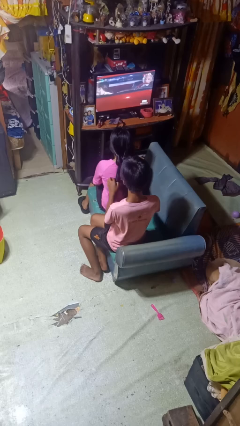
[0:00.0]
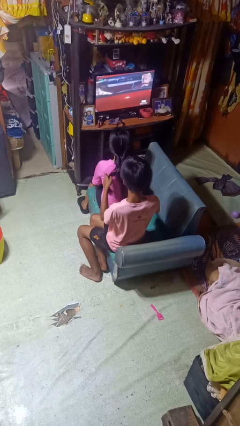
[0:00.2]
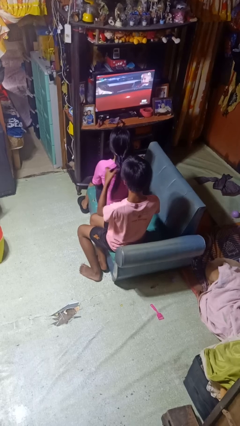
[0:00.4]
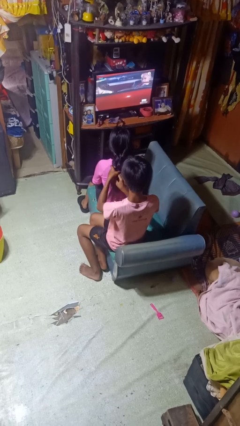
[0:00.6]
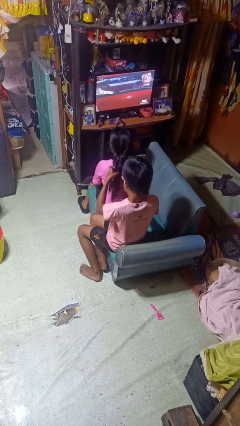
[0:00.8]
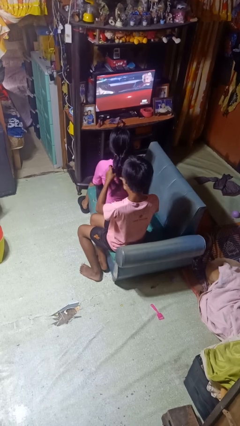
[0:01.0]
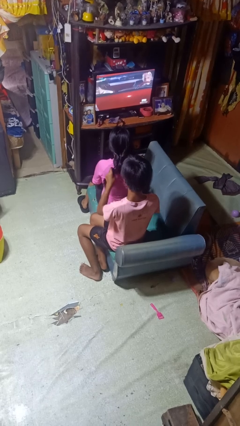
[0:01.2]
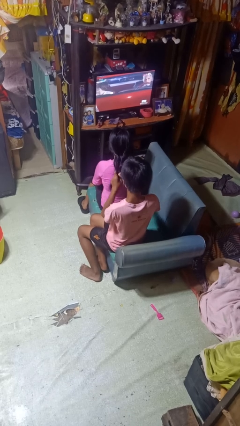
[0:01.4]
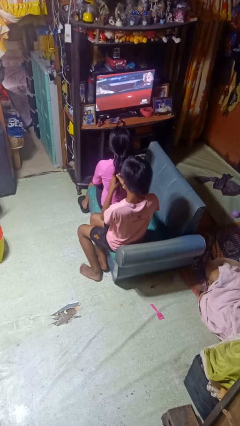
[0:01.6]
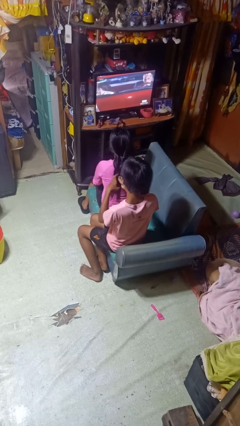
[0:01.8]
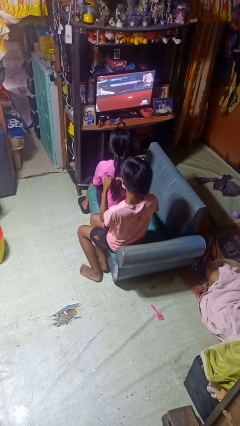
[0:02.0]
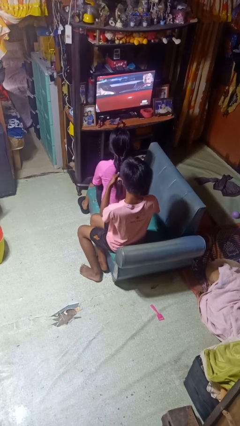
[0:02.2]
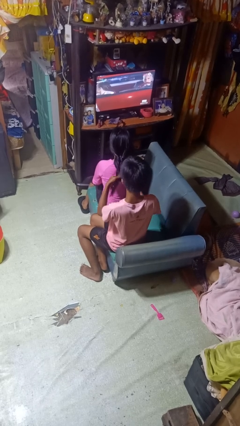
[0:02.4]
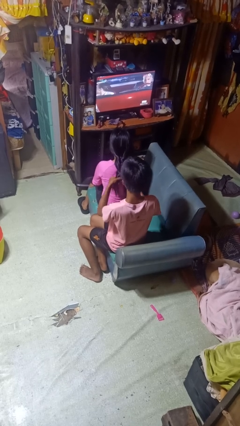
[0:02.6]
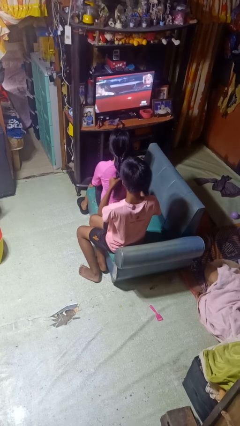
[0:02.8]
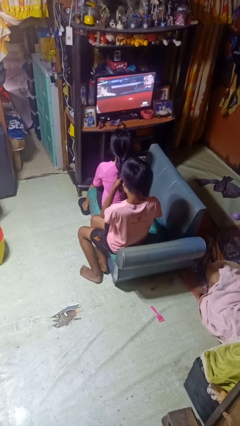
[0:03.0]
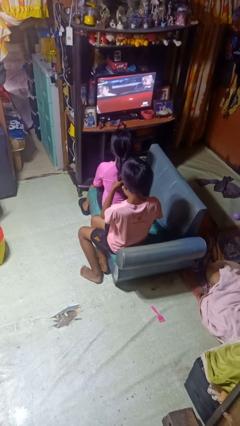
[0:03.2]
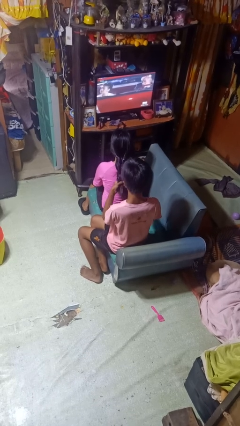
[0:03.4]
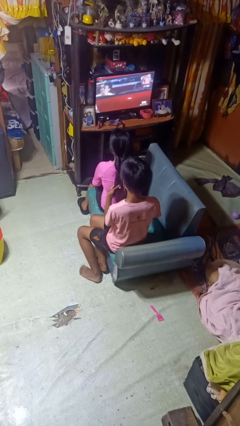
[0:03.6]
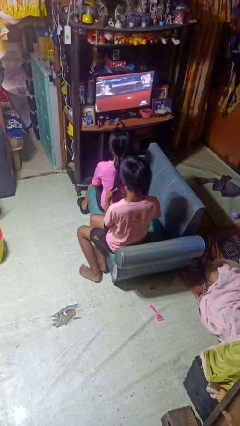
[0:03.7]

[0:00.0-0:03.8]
person braids hair of person

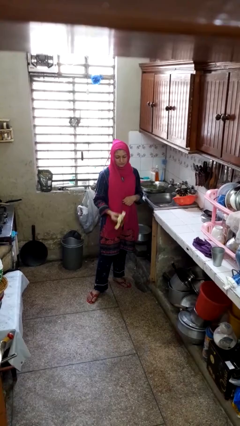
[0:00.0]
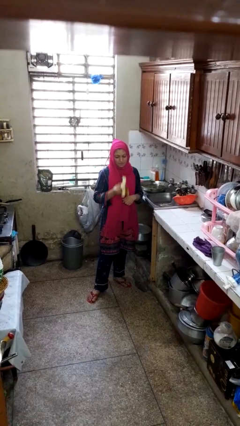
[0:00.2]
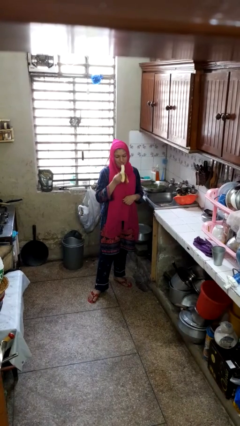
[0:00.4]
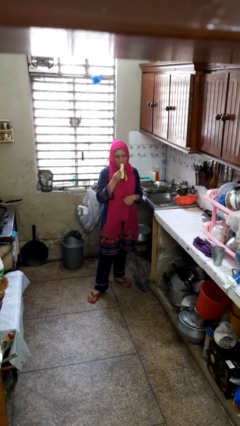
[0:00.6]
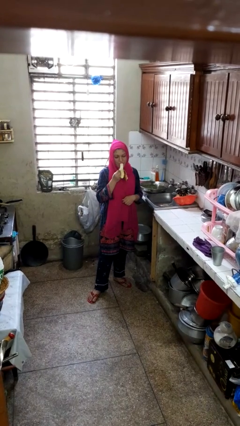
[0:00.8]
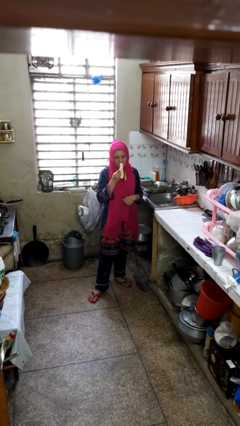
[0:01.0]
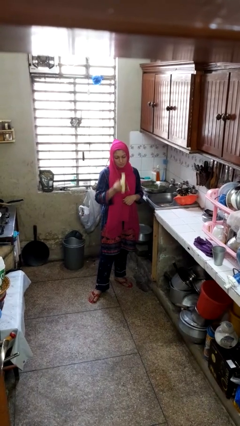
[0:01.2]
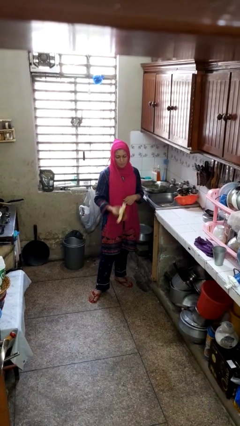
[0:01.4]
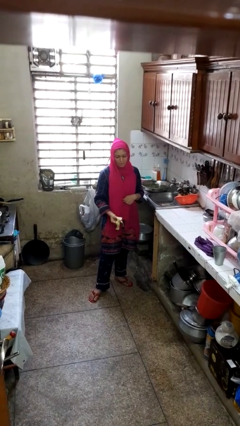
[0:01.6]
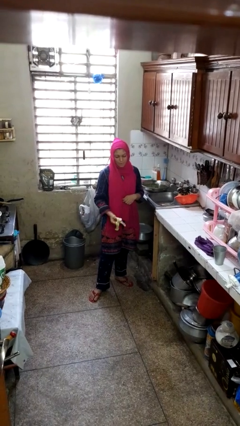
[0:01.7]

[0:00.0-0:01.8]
person eats banana

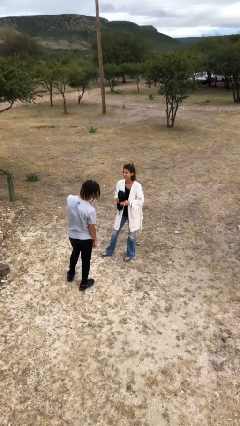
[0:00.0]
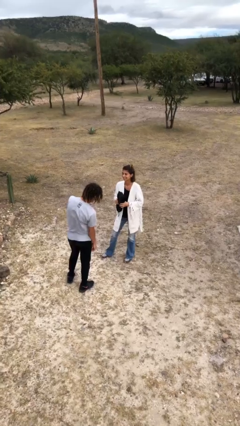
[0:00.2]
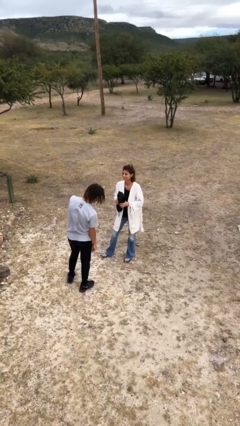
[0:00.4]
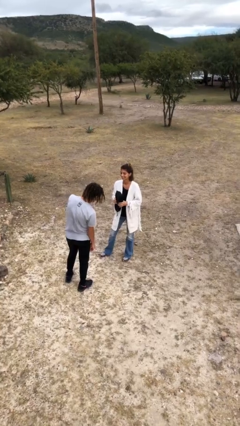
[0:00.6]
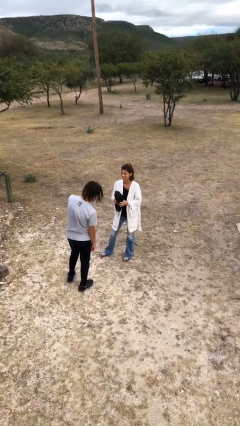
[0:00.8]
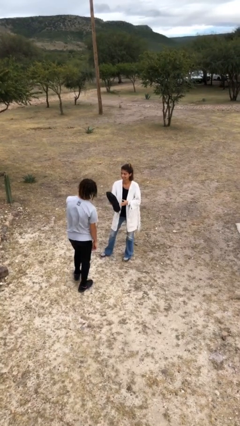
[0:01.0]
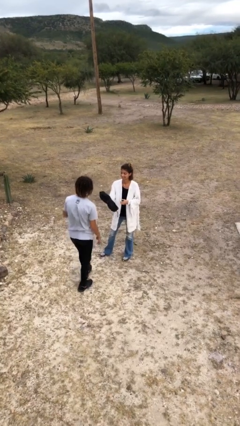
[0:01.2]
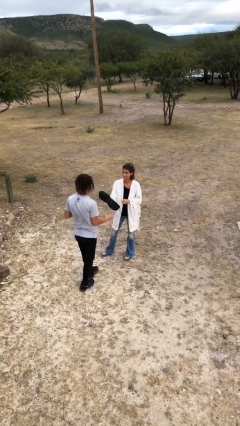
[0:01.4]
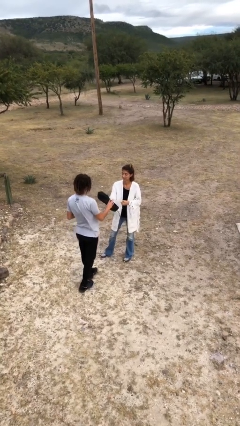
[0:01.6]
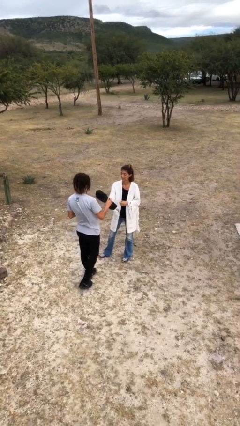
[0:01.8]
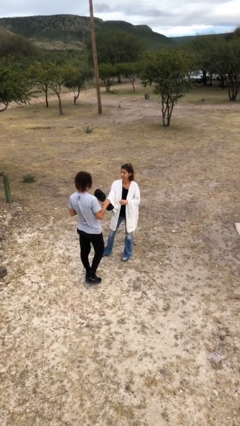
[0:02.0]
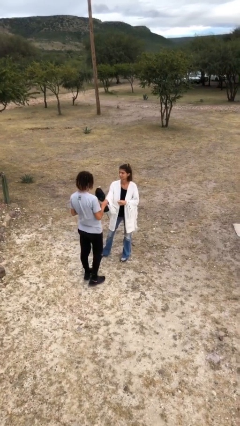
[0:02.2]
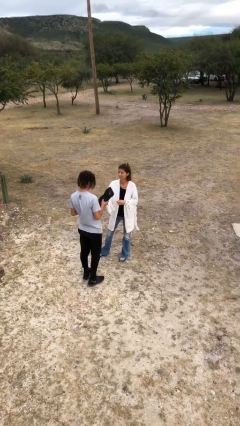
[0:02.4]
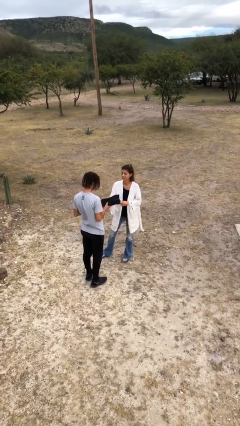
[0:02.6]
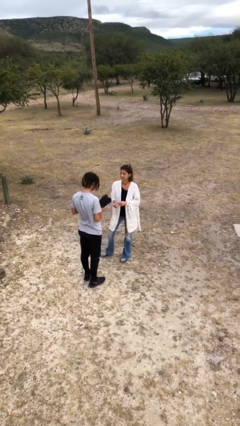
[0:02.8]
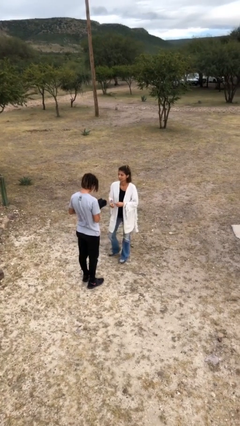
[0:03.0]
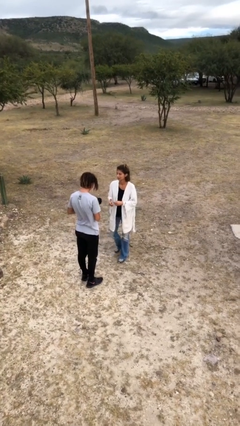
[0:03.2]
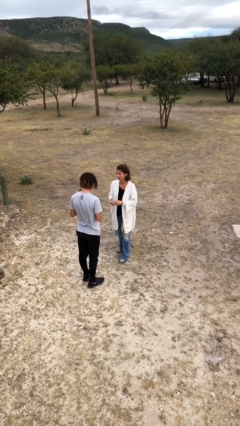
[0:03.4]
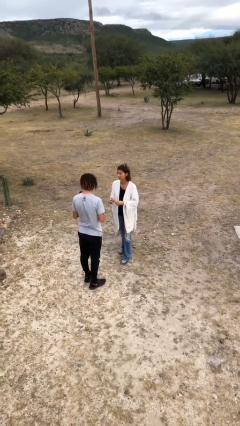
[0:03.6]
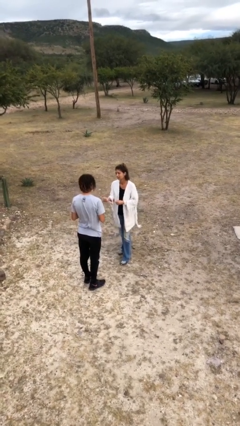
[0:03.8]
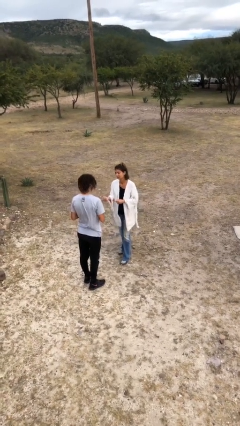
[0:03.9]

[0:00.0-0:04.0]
person transfers object to person

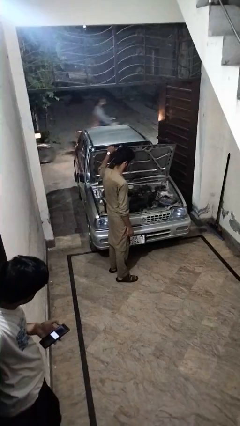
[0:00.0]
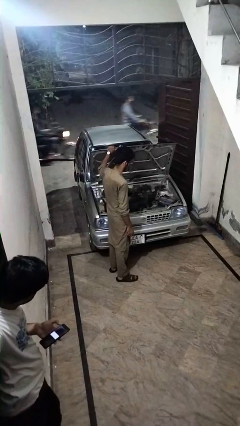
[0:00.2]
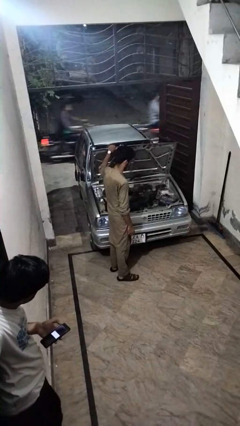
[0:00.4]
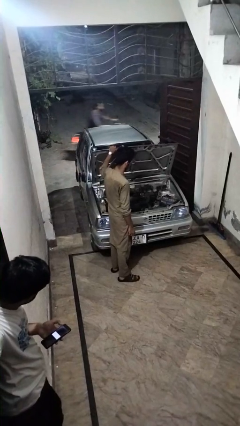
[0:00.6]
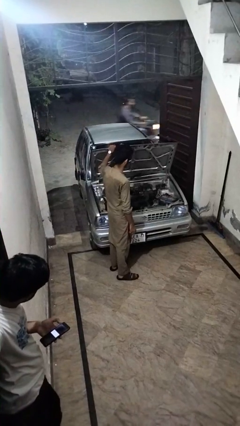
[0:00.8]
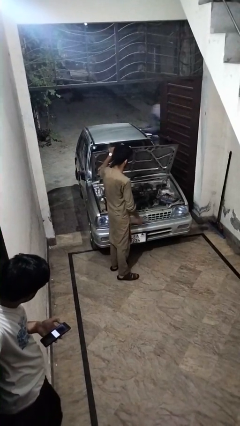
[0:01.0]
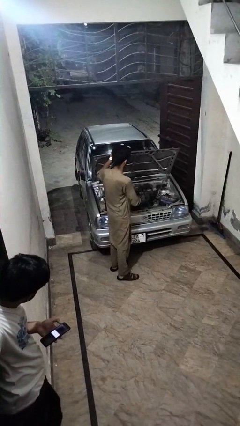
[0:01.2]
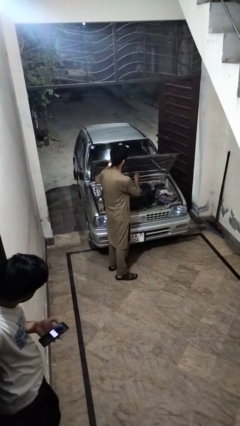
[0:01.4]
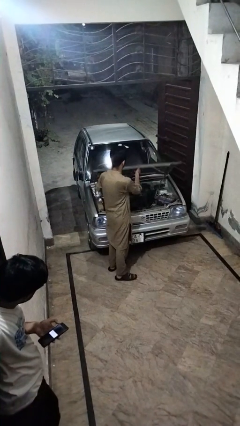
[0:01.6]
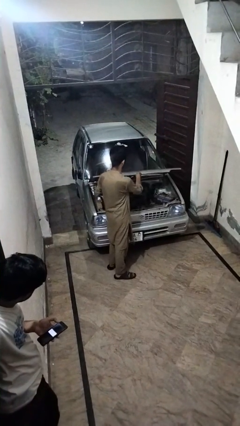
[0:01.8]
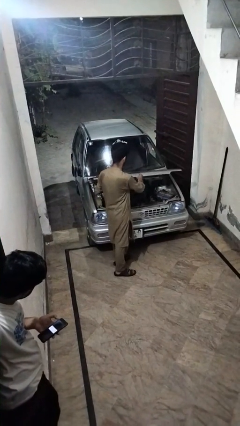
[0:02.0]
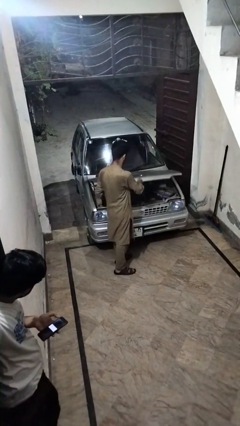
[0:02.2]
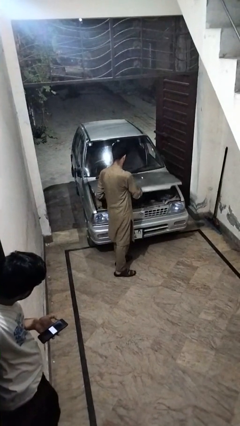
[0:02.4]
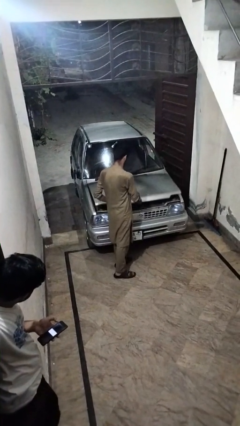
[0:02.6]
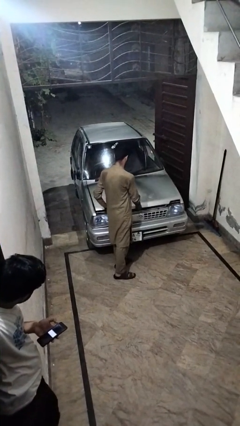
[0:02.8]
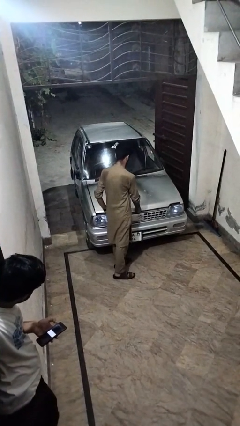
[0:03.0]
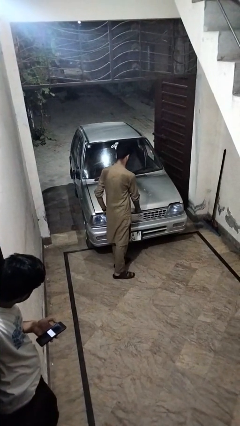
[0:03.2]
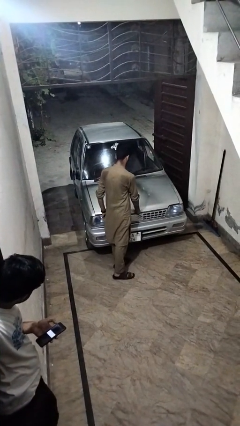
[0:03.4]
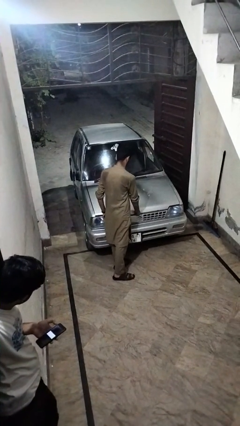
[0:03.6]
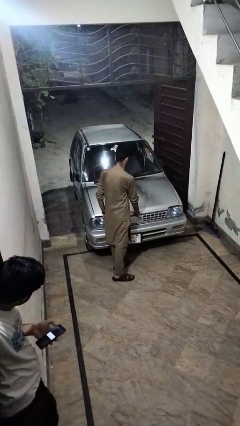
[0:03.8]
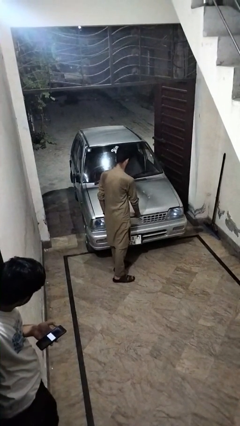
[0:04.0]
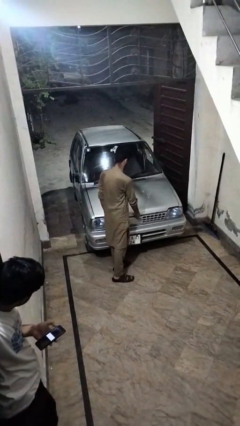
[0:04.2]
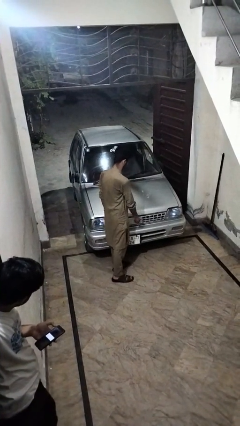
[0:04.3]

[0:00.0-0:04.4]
person closes car hood

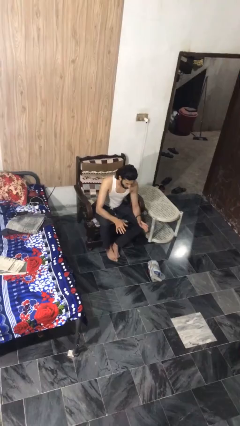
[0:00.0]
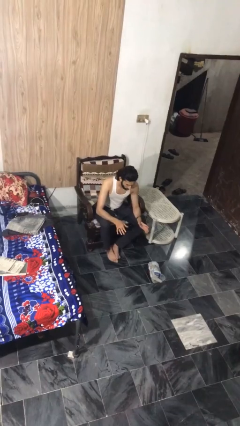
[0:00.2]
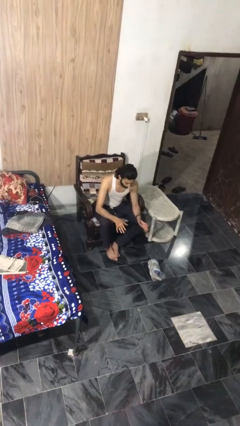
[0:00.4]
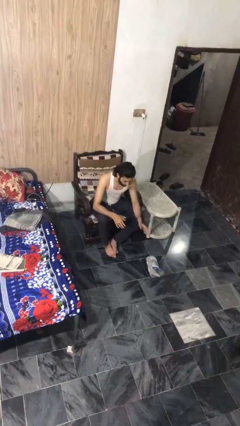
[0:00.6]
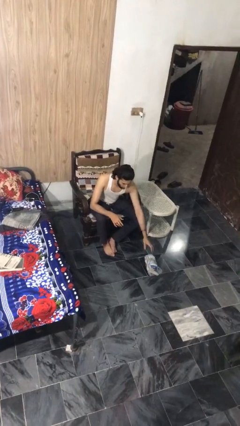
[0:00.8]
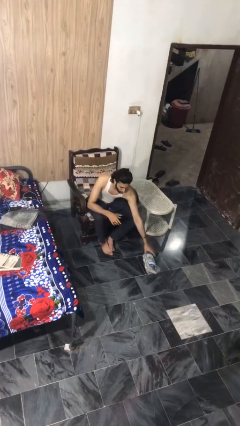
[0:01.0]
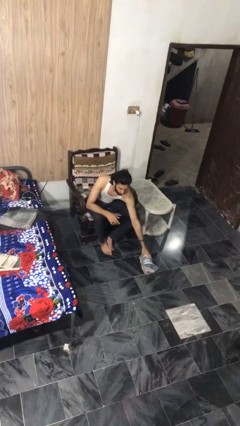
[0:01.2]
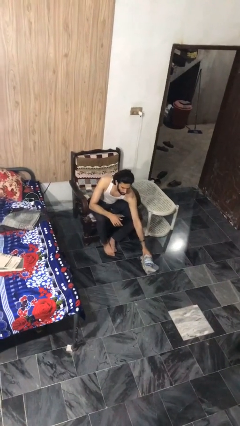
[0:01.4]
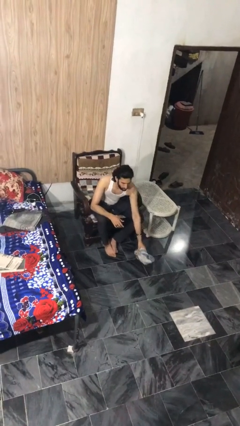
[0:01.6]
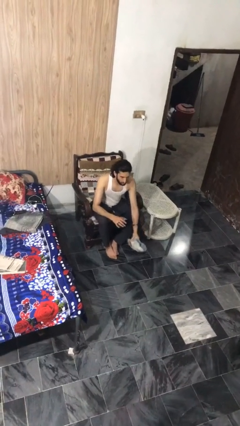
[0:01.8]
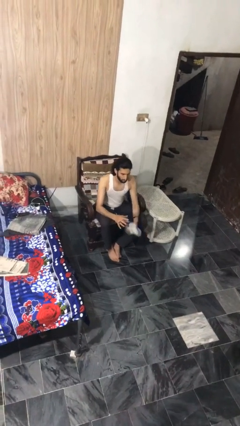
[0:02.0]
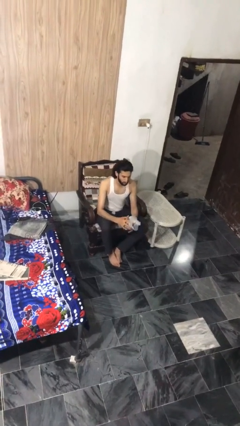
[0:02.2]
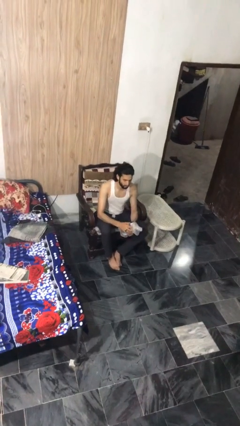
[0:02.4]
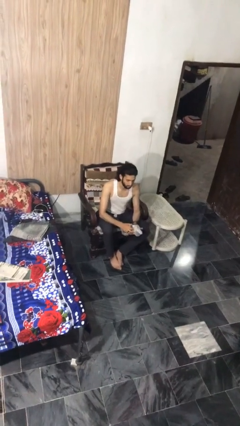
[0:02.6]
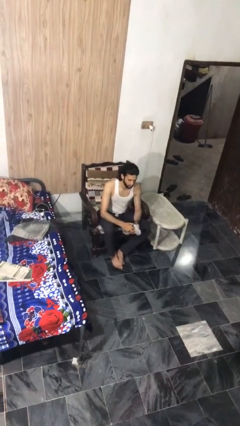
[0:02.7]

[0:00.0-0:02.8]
person picks up object from floor

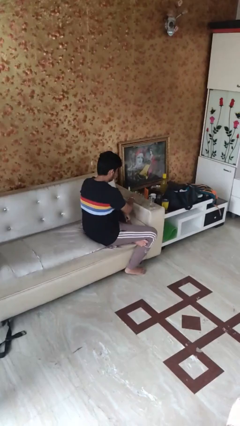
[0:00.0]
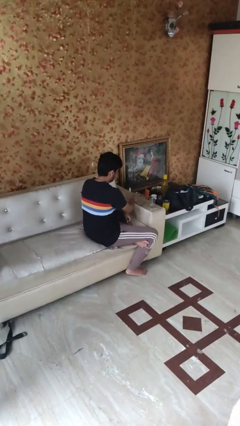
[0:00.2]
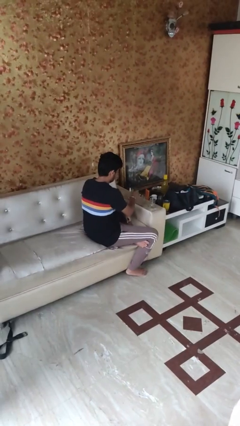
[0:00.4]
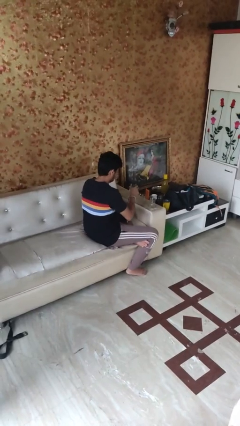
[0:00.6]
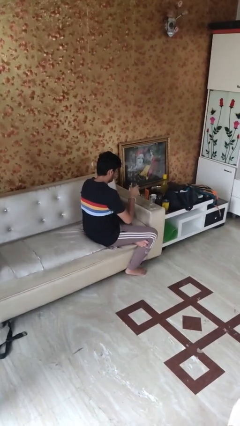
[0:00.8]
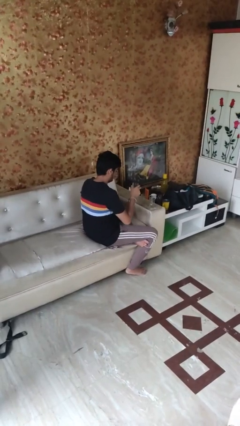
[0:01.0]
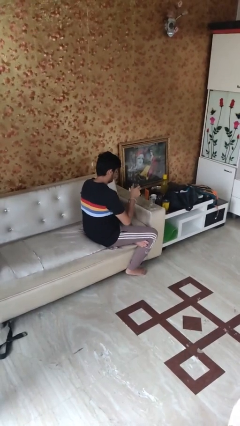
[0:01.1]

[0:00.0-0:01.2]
person picks up object from table
